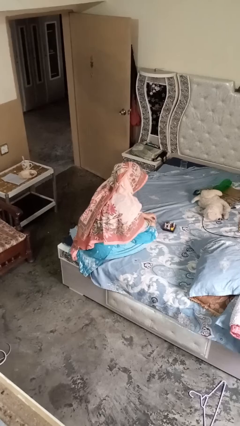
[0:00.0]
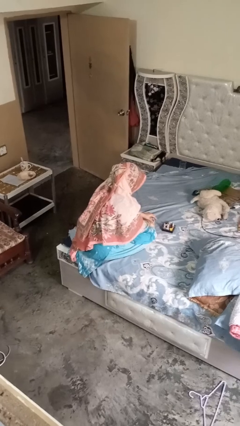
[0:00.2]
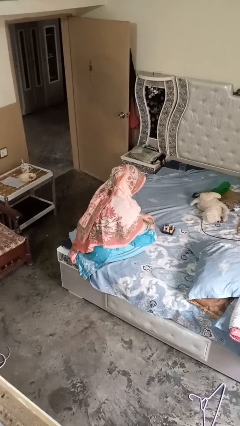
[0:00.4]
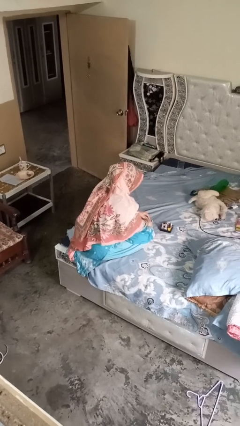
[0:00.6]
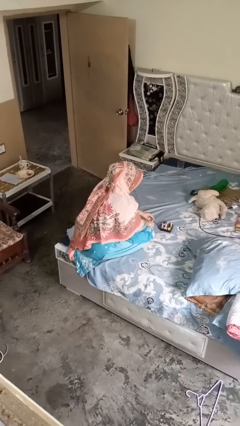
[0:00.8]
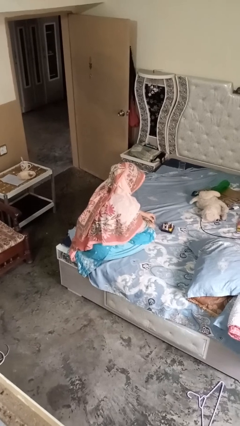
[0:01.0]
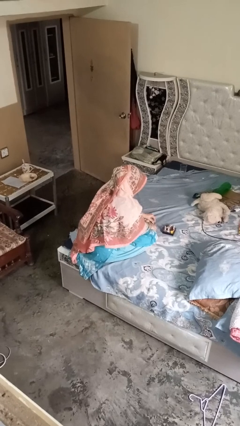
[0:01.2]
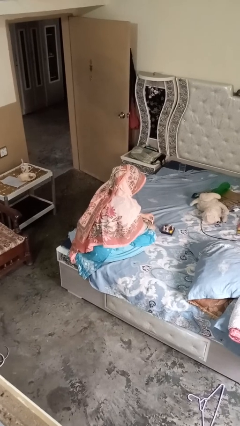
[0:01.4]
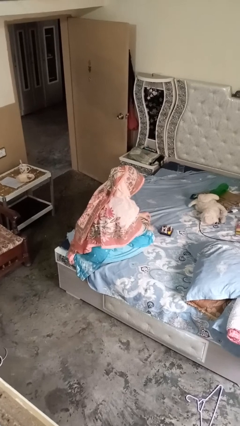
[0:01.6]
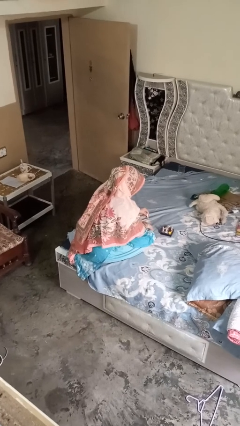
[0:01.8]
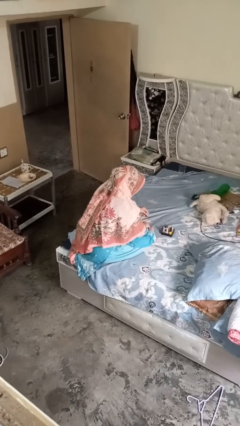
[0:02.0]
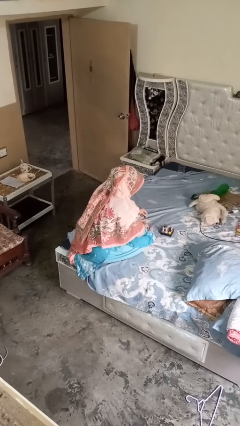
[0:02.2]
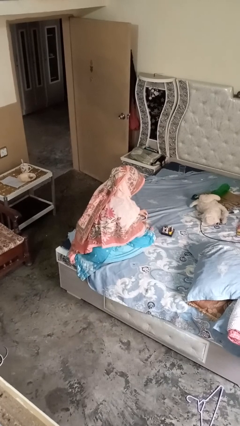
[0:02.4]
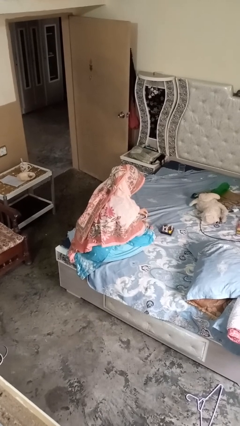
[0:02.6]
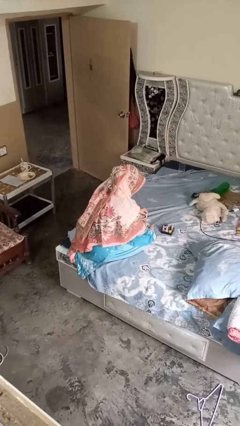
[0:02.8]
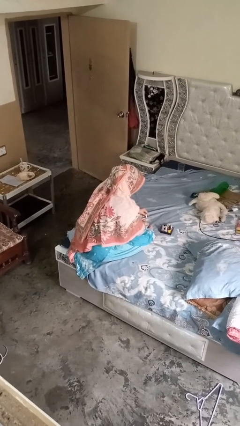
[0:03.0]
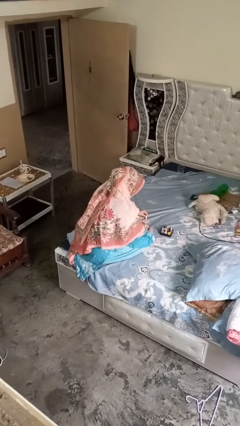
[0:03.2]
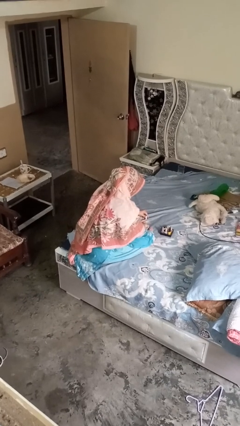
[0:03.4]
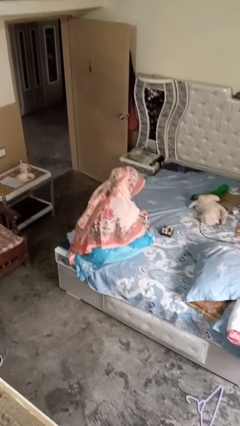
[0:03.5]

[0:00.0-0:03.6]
person paints fingernails

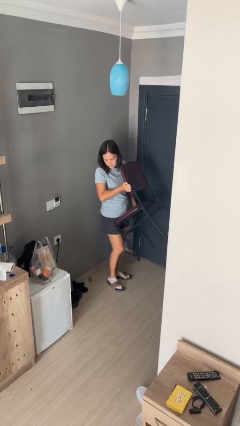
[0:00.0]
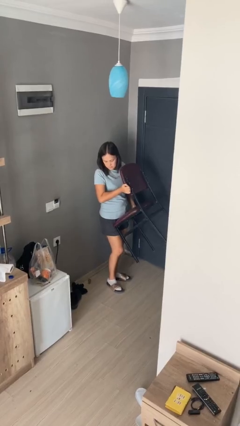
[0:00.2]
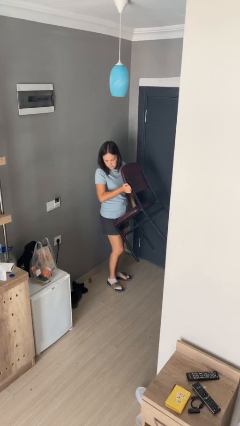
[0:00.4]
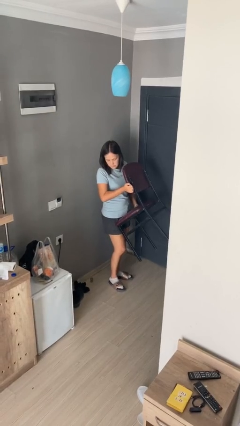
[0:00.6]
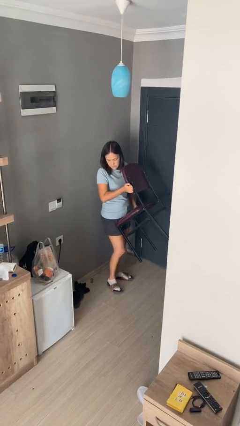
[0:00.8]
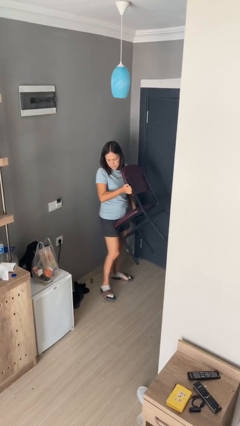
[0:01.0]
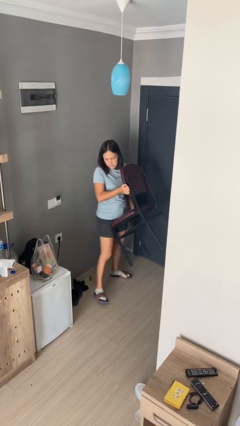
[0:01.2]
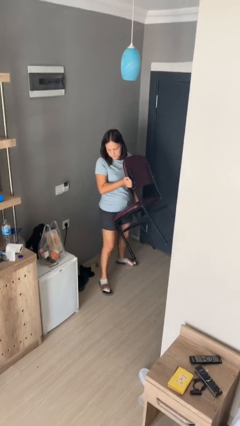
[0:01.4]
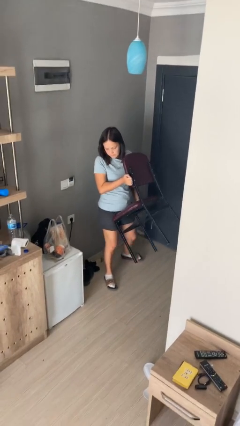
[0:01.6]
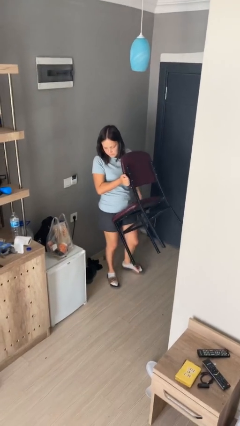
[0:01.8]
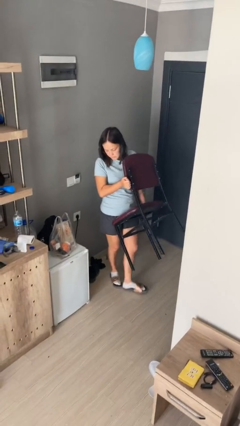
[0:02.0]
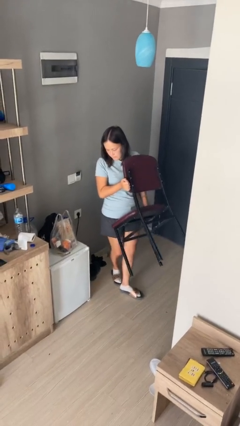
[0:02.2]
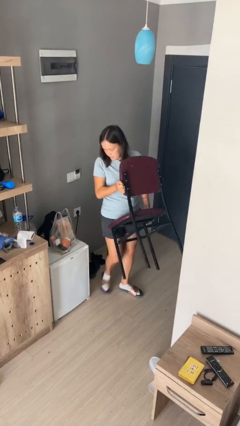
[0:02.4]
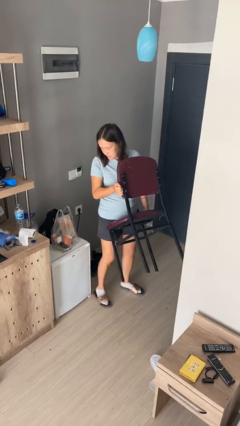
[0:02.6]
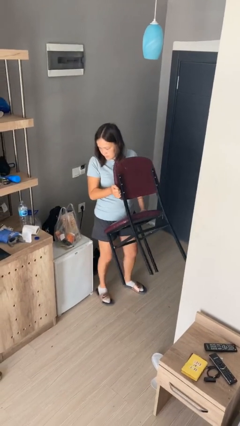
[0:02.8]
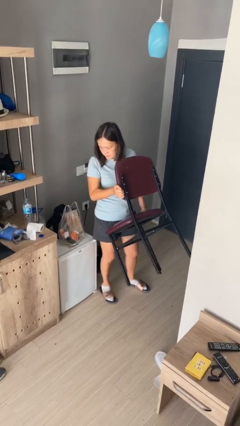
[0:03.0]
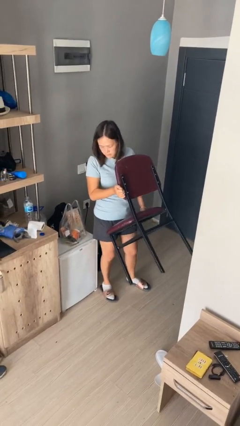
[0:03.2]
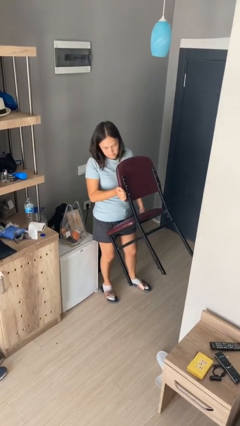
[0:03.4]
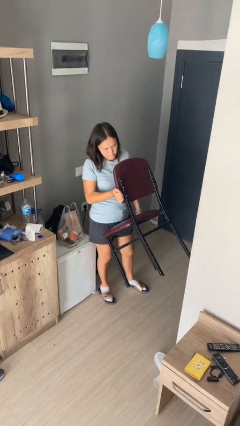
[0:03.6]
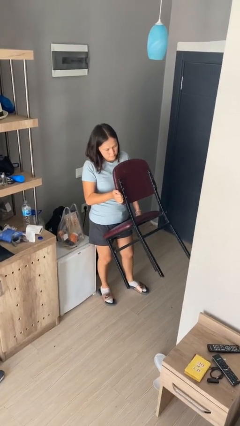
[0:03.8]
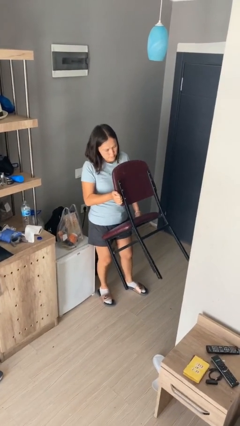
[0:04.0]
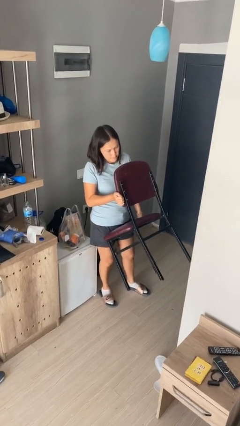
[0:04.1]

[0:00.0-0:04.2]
person carries furniture

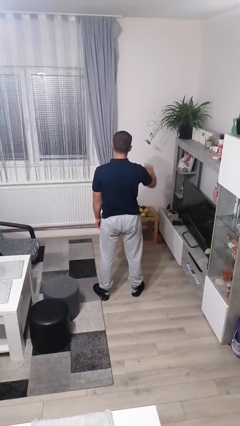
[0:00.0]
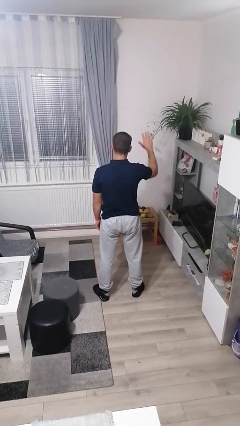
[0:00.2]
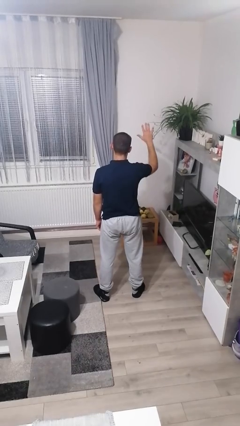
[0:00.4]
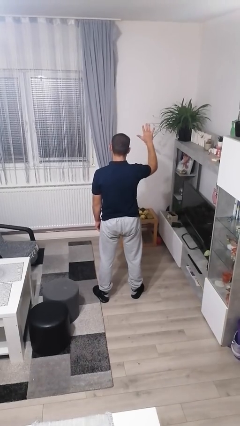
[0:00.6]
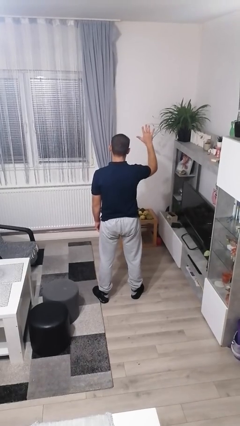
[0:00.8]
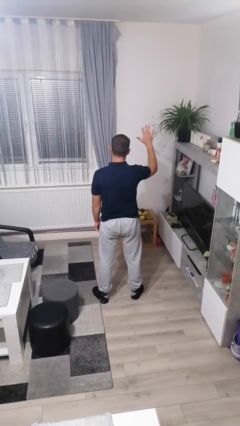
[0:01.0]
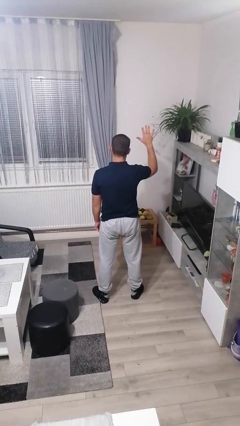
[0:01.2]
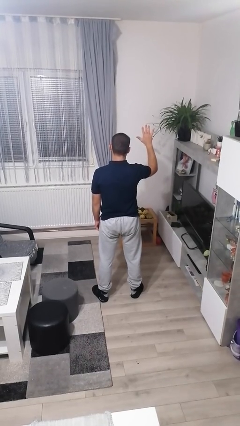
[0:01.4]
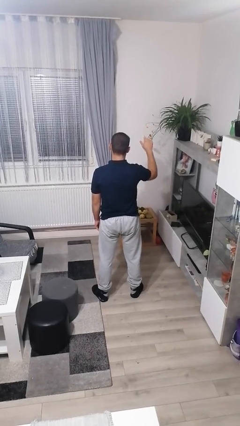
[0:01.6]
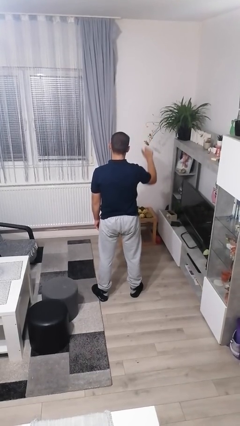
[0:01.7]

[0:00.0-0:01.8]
person gestures number five

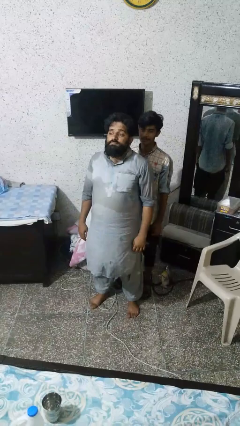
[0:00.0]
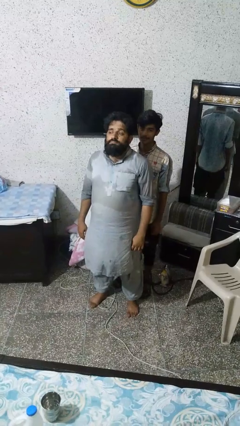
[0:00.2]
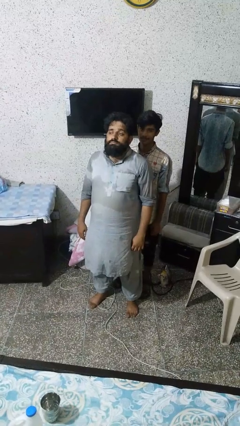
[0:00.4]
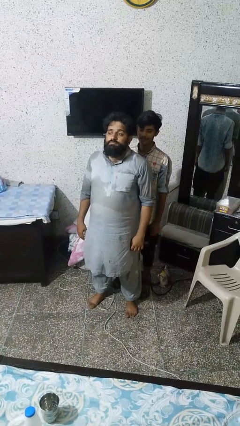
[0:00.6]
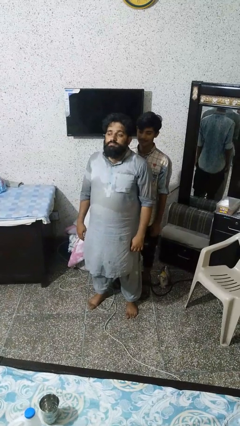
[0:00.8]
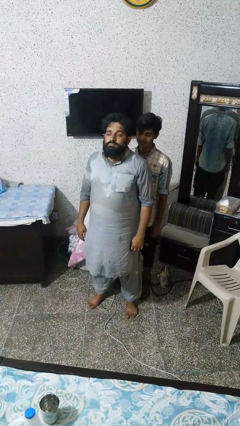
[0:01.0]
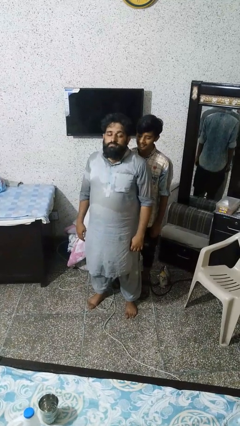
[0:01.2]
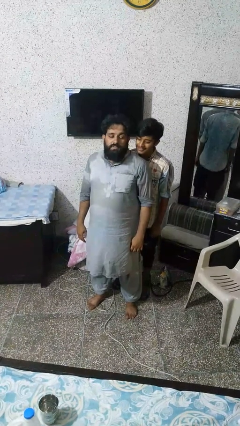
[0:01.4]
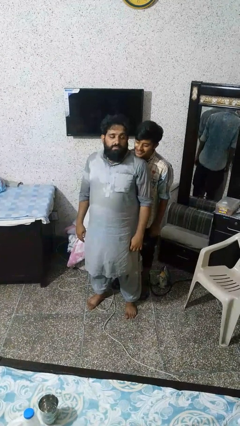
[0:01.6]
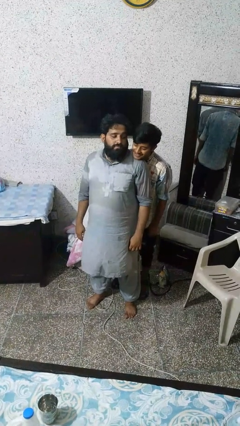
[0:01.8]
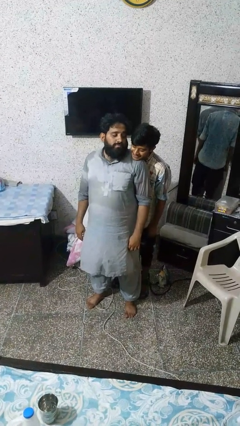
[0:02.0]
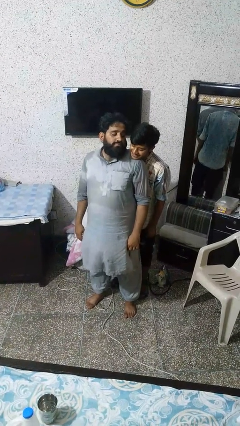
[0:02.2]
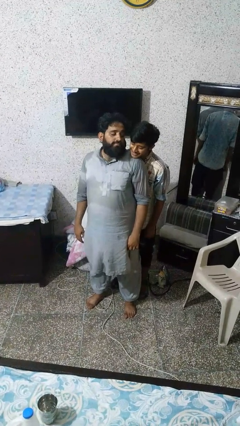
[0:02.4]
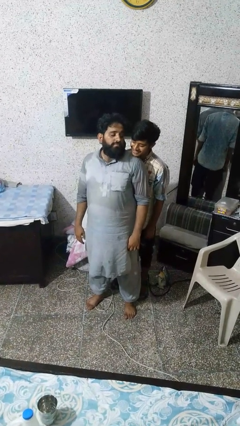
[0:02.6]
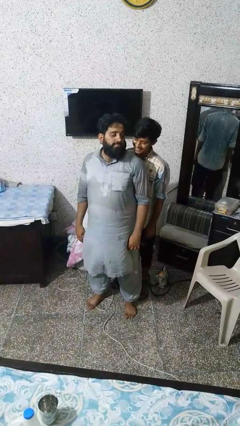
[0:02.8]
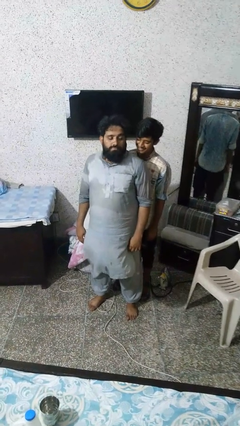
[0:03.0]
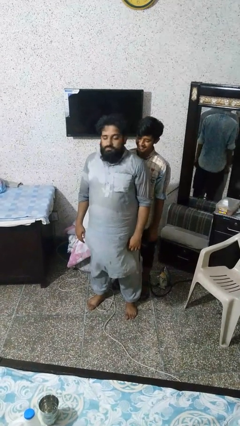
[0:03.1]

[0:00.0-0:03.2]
person looks over shoulder

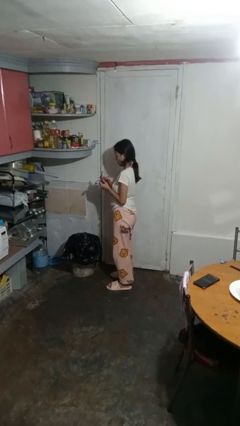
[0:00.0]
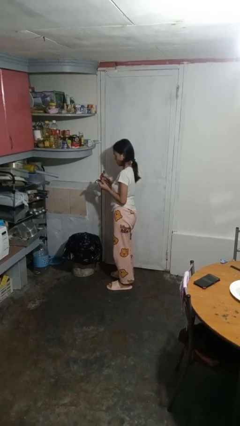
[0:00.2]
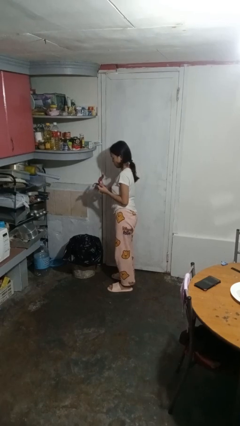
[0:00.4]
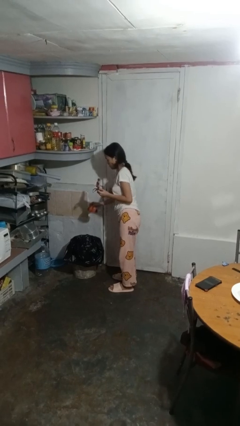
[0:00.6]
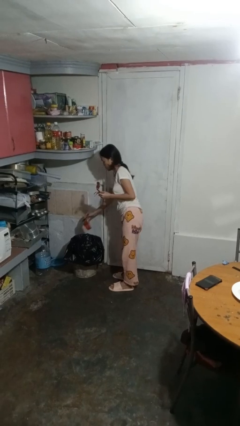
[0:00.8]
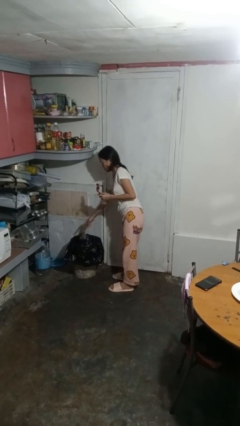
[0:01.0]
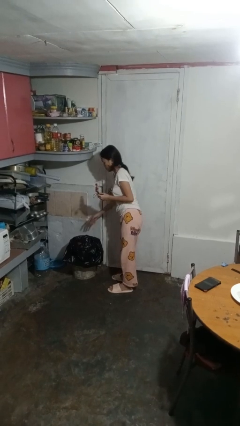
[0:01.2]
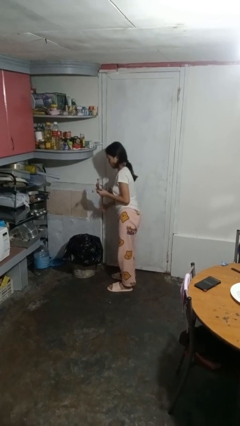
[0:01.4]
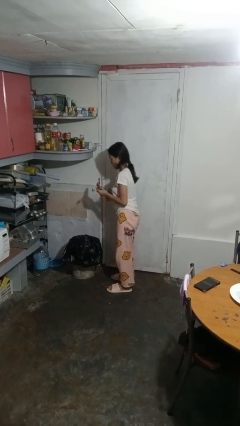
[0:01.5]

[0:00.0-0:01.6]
person discards trash

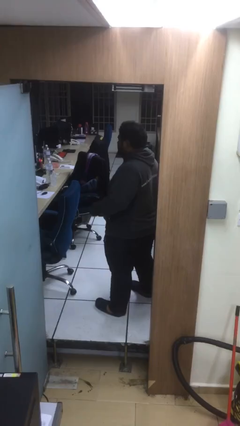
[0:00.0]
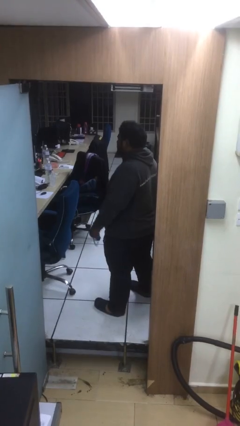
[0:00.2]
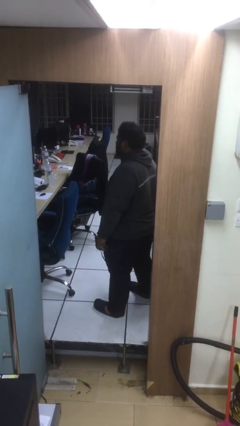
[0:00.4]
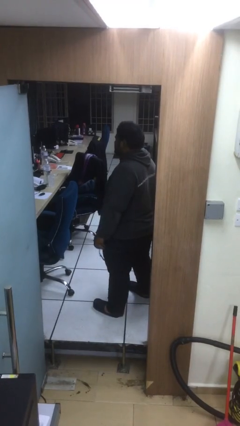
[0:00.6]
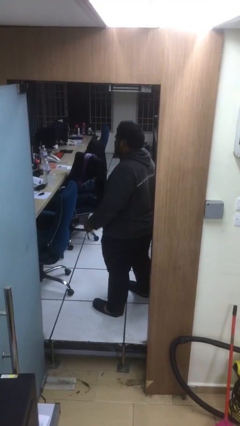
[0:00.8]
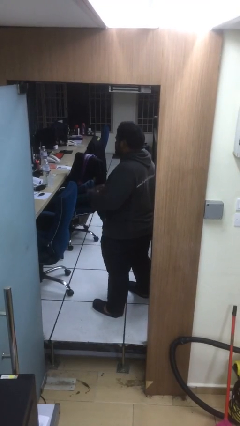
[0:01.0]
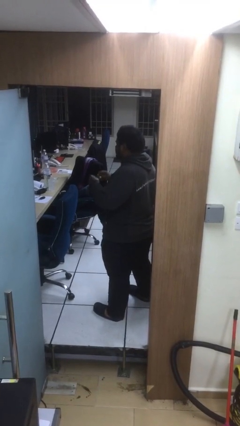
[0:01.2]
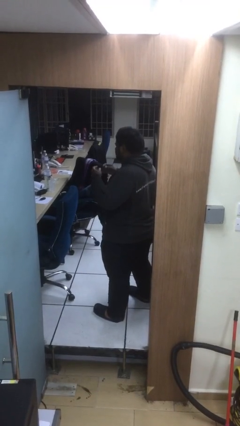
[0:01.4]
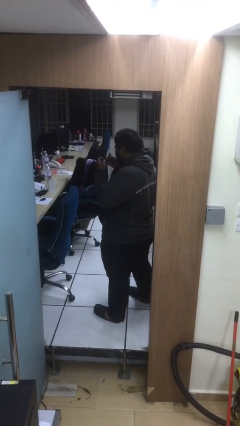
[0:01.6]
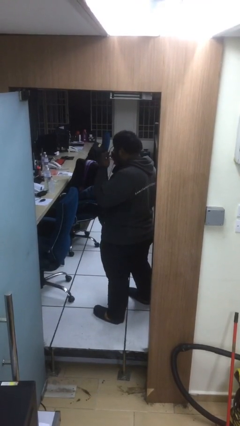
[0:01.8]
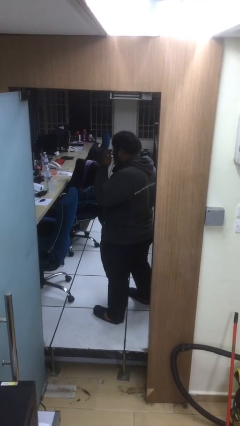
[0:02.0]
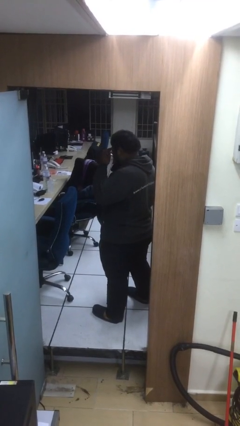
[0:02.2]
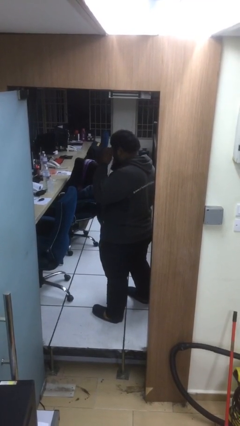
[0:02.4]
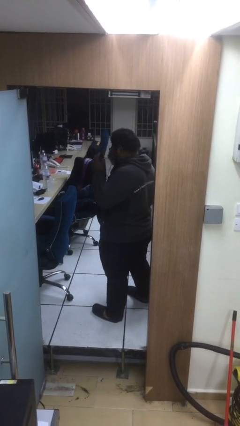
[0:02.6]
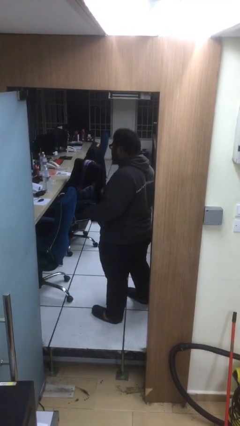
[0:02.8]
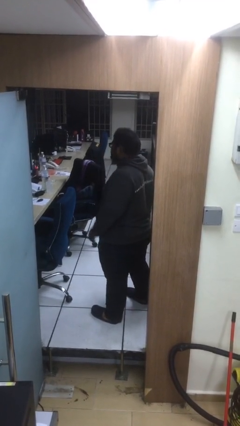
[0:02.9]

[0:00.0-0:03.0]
person puts on glasses
